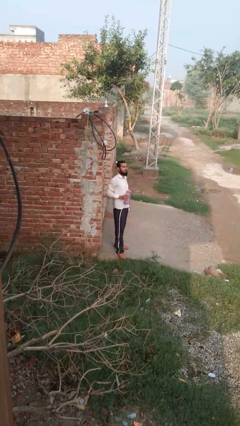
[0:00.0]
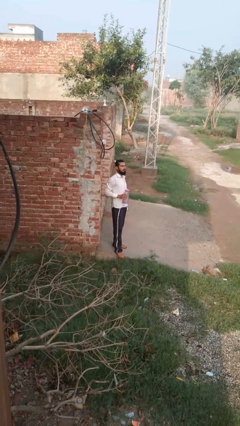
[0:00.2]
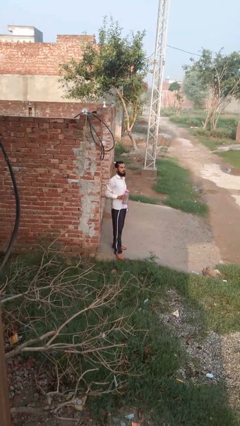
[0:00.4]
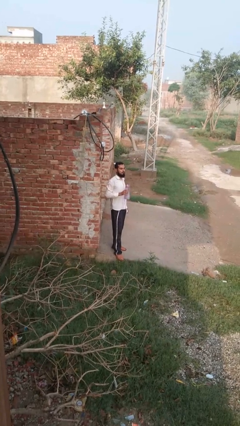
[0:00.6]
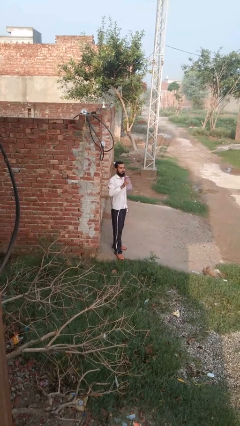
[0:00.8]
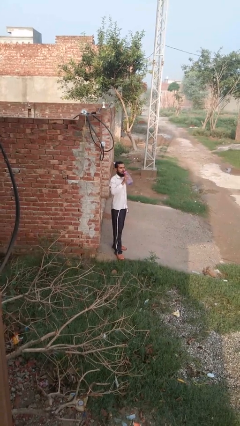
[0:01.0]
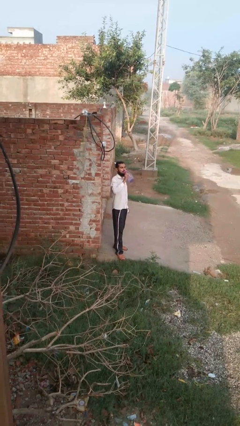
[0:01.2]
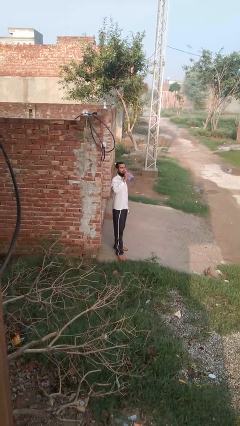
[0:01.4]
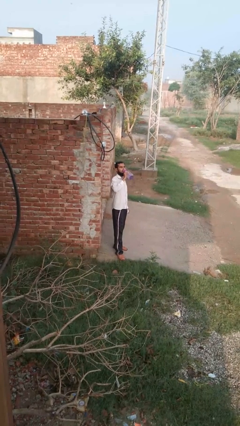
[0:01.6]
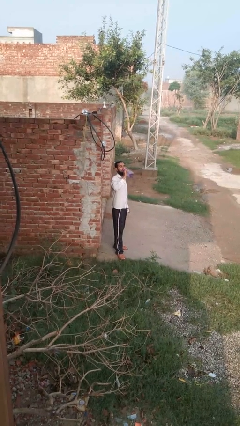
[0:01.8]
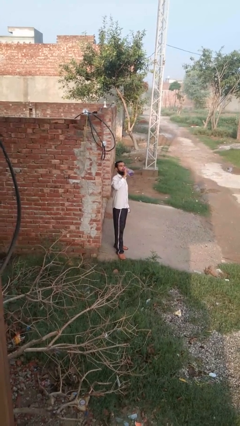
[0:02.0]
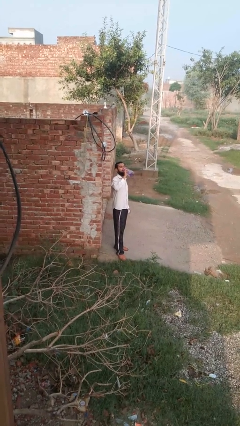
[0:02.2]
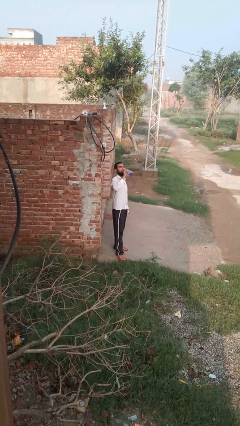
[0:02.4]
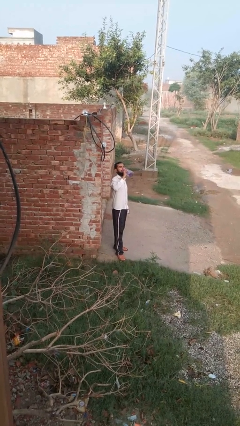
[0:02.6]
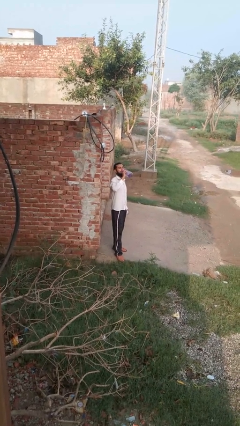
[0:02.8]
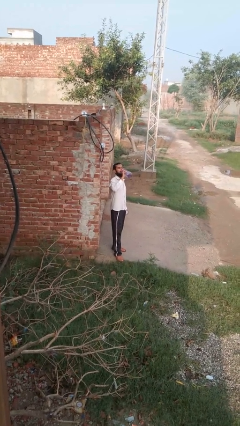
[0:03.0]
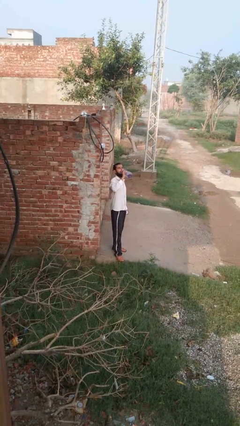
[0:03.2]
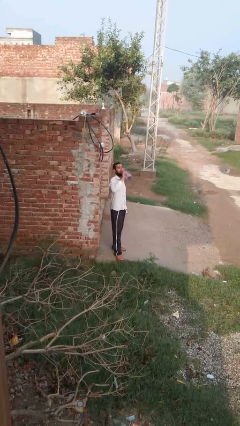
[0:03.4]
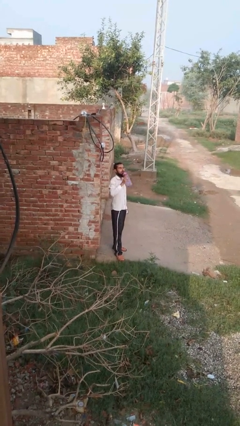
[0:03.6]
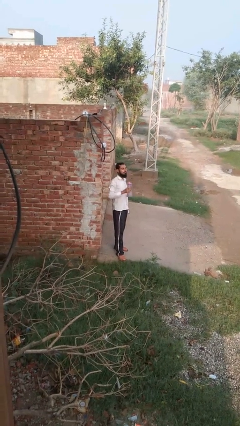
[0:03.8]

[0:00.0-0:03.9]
person drinks from bottle

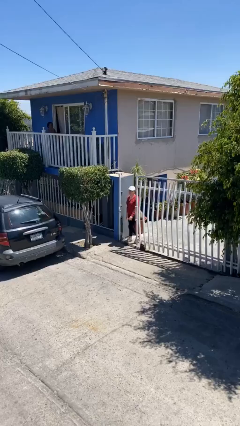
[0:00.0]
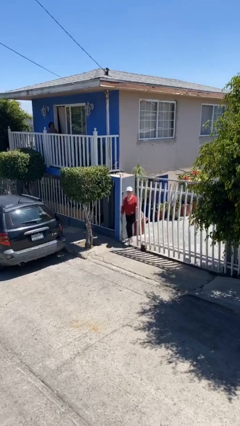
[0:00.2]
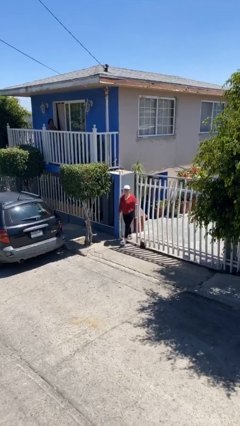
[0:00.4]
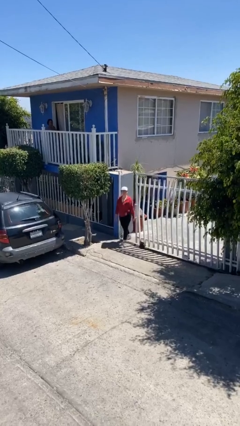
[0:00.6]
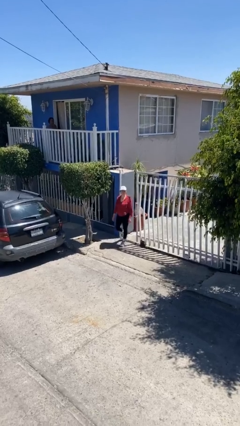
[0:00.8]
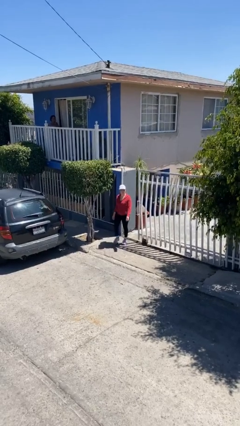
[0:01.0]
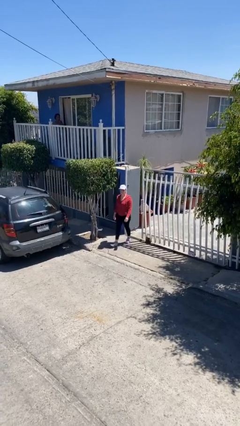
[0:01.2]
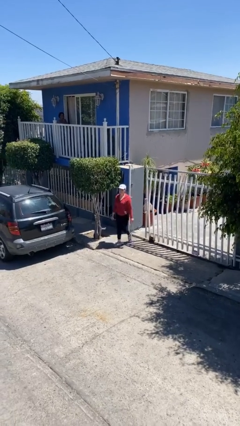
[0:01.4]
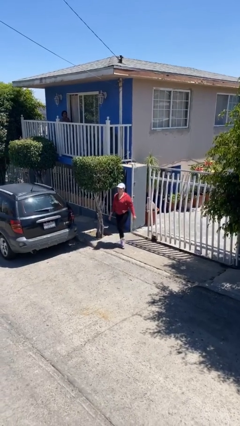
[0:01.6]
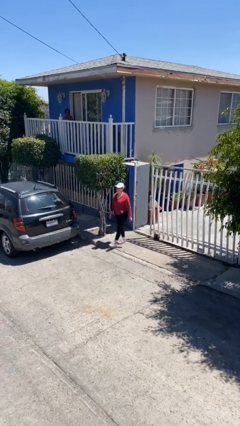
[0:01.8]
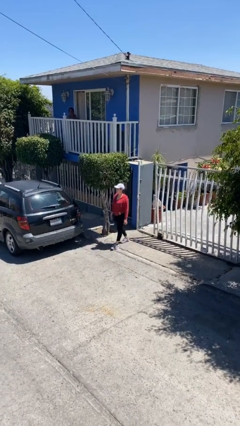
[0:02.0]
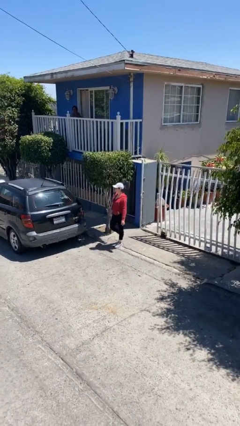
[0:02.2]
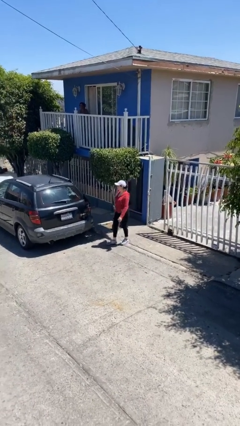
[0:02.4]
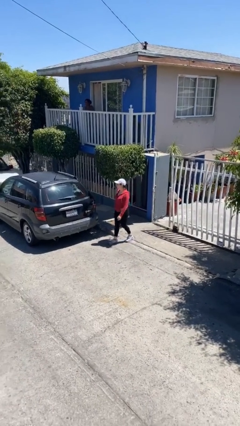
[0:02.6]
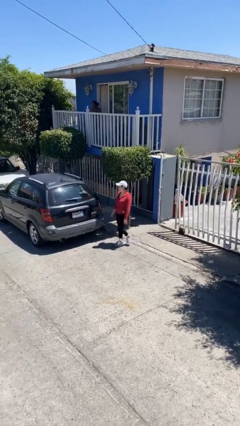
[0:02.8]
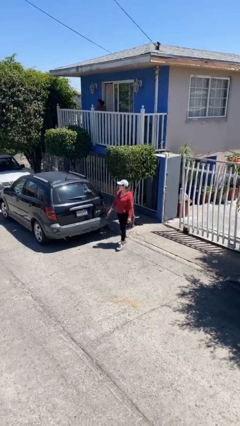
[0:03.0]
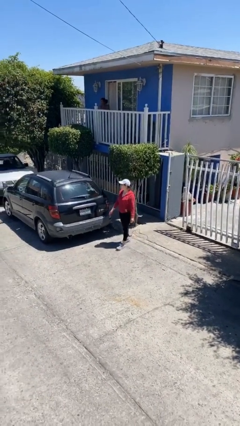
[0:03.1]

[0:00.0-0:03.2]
person enters scene through structure

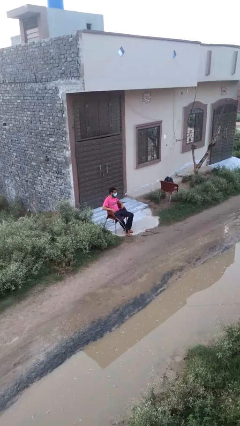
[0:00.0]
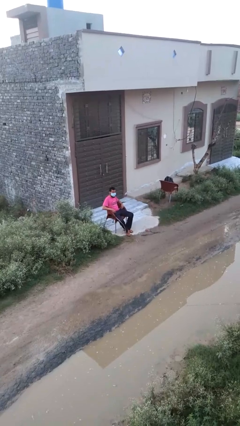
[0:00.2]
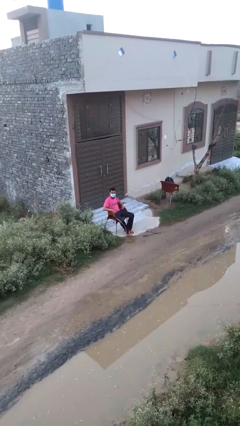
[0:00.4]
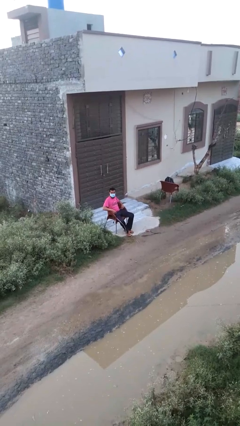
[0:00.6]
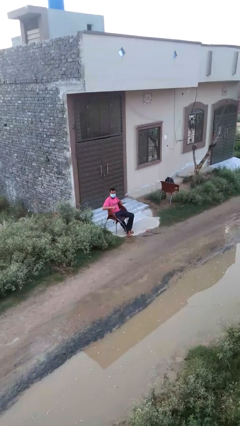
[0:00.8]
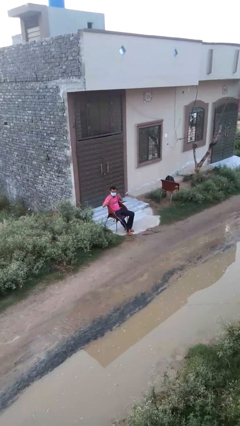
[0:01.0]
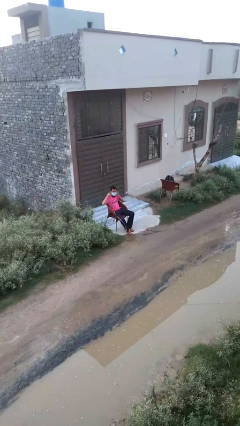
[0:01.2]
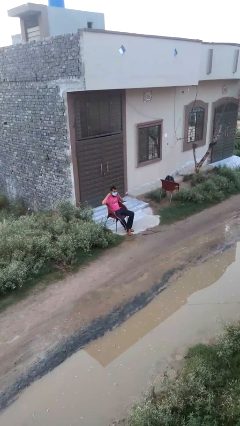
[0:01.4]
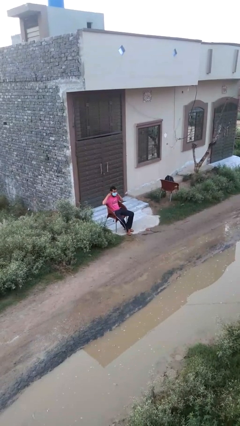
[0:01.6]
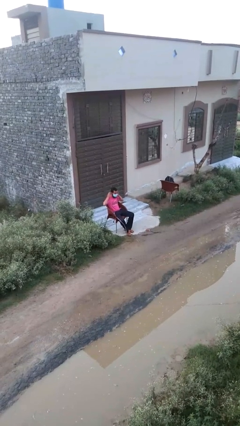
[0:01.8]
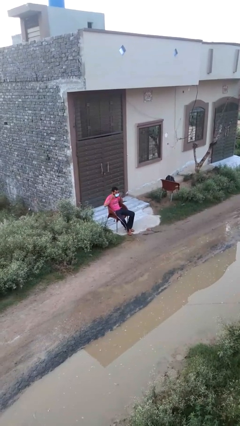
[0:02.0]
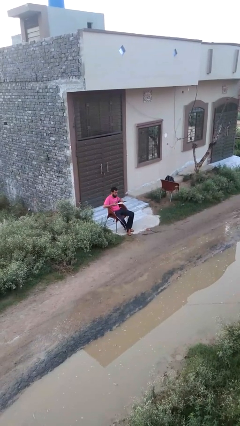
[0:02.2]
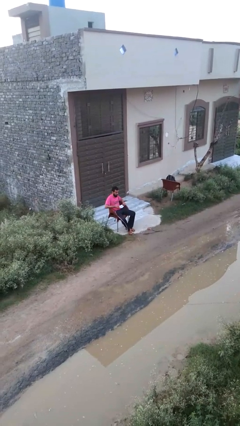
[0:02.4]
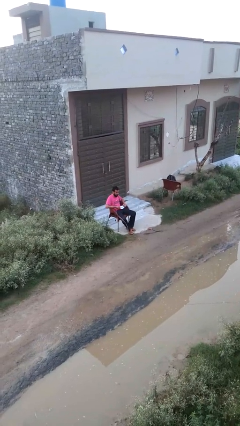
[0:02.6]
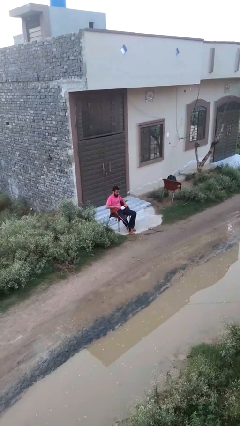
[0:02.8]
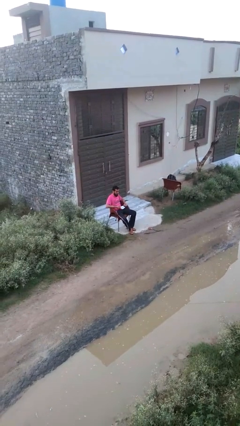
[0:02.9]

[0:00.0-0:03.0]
person takes off facemask

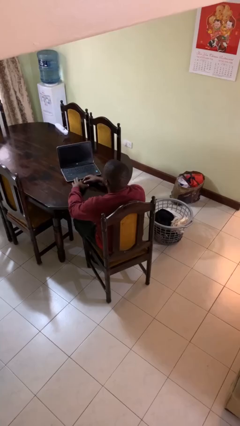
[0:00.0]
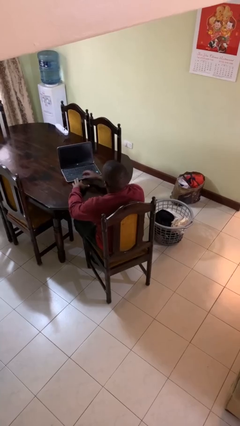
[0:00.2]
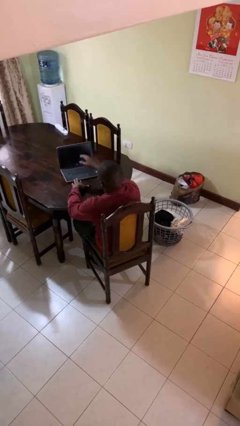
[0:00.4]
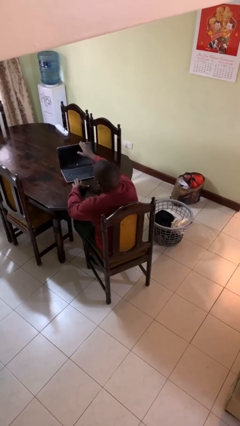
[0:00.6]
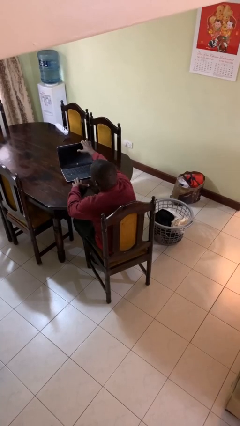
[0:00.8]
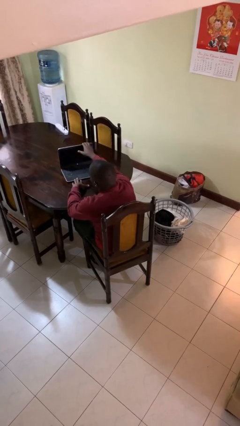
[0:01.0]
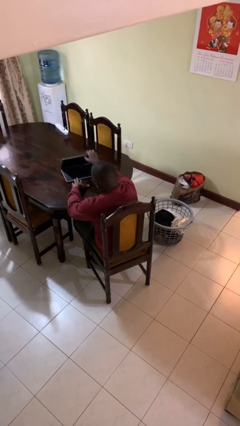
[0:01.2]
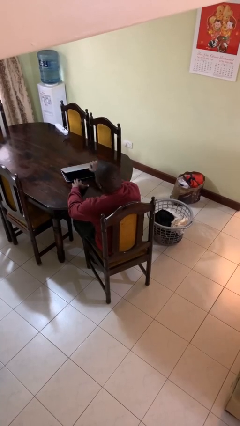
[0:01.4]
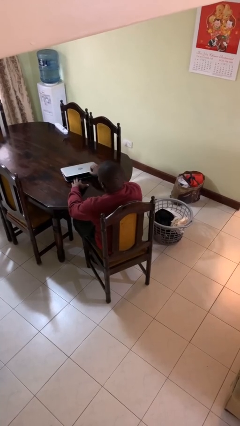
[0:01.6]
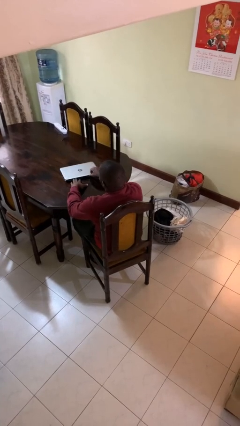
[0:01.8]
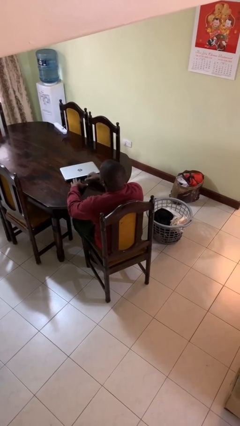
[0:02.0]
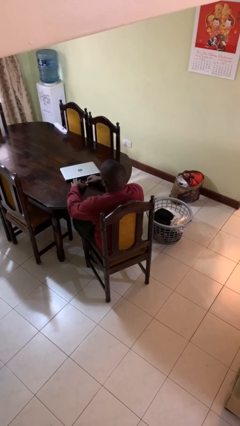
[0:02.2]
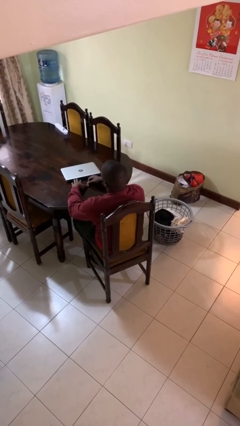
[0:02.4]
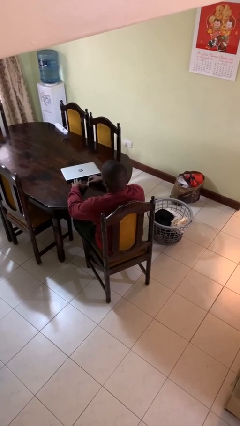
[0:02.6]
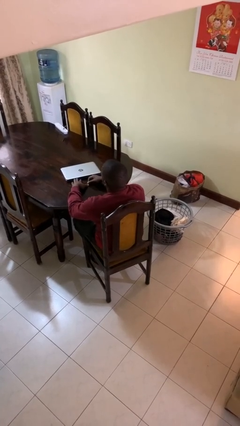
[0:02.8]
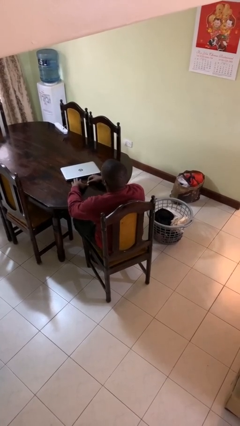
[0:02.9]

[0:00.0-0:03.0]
person closes laptop

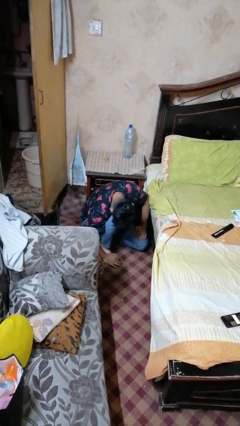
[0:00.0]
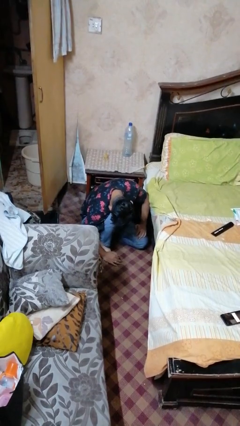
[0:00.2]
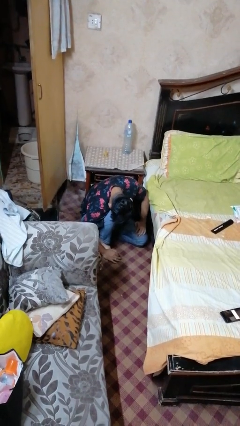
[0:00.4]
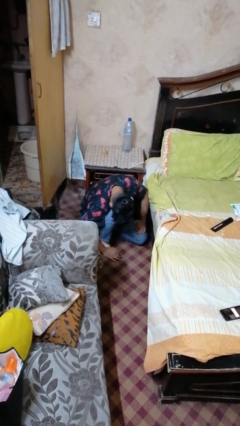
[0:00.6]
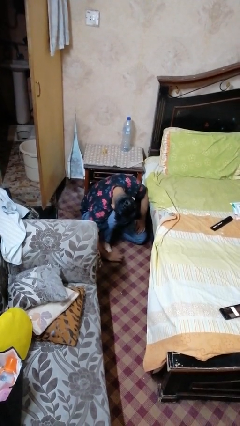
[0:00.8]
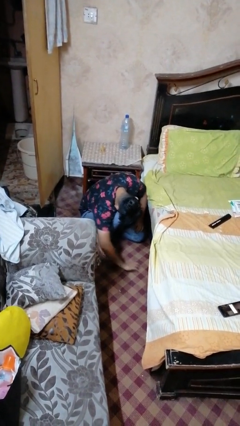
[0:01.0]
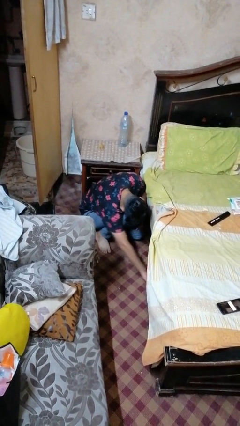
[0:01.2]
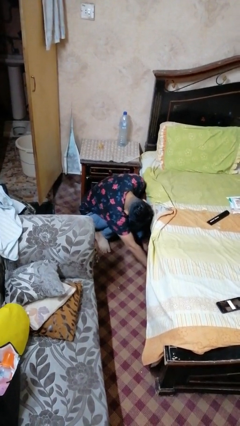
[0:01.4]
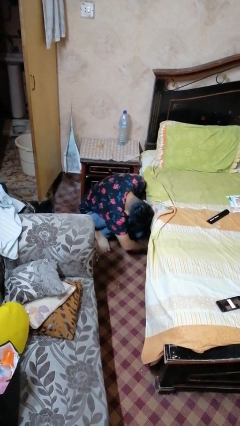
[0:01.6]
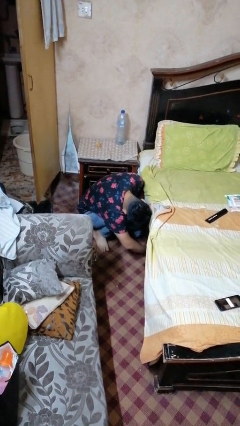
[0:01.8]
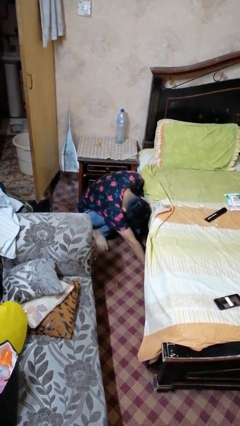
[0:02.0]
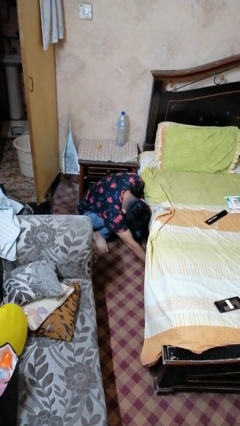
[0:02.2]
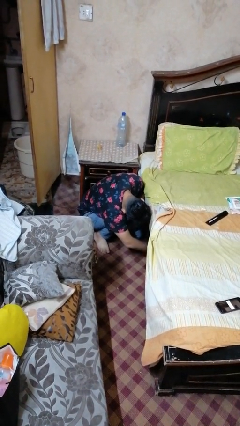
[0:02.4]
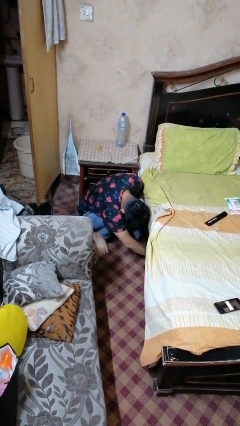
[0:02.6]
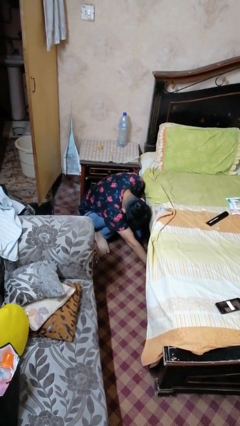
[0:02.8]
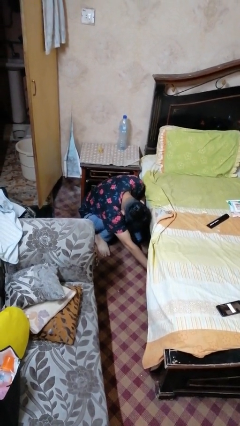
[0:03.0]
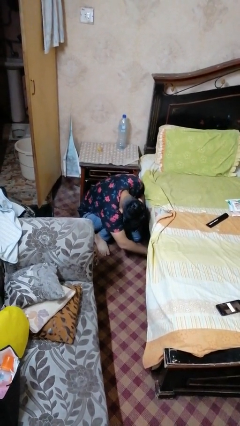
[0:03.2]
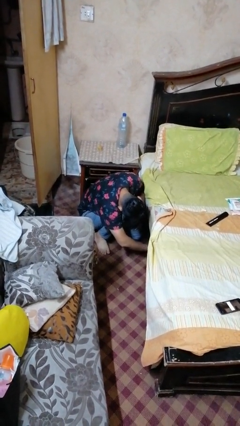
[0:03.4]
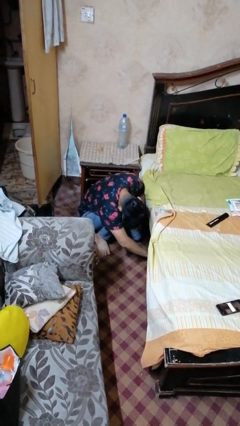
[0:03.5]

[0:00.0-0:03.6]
person searches under bed
